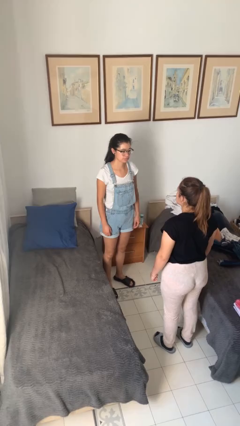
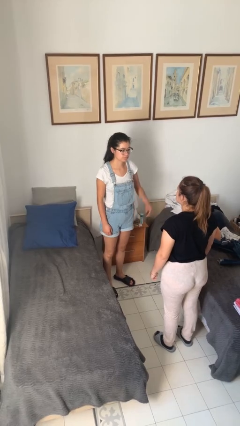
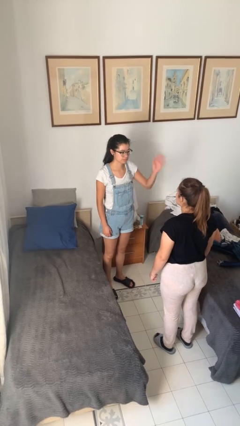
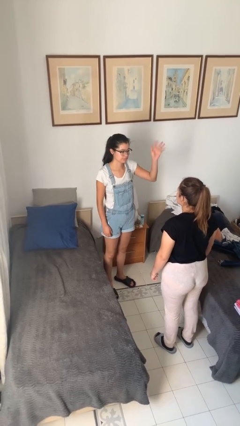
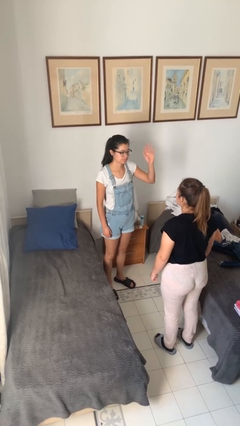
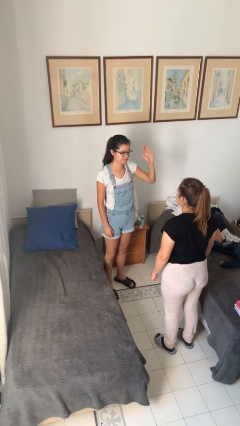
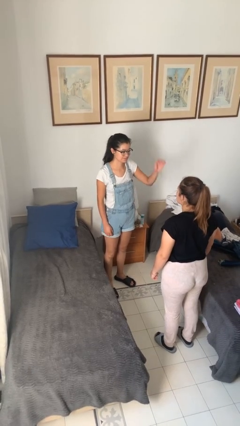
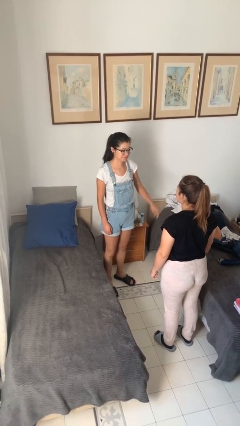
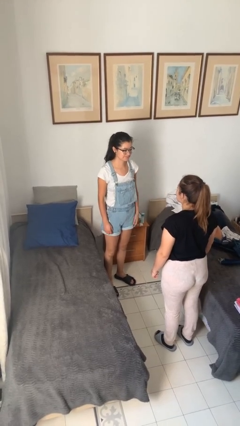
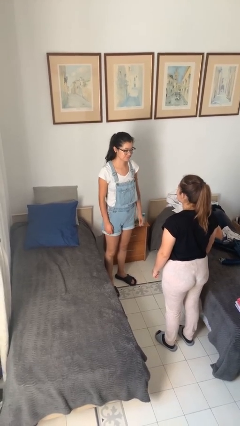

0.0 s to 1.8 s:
person waves at person

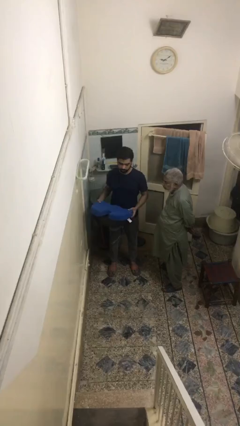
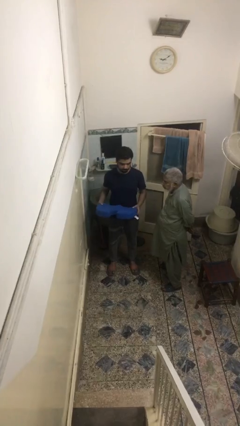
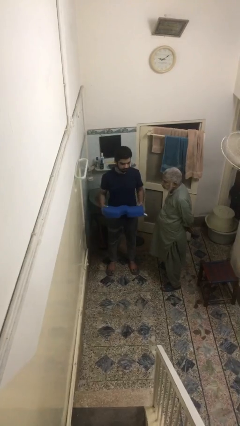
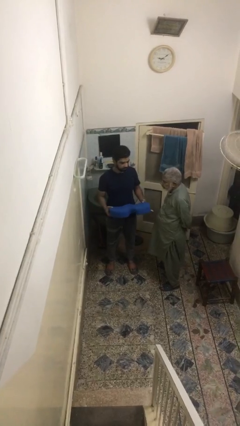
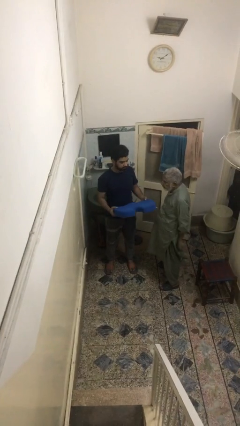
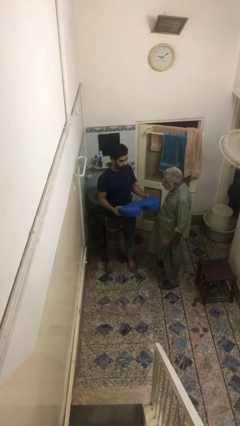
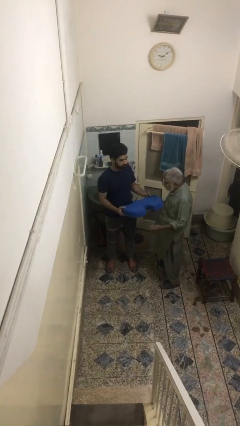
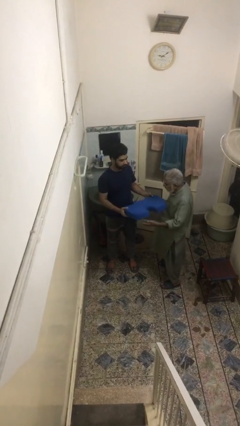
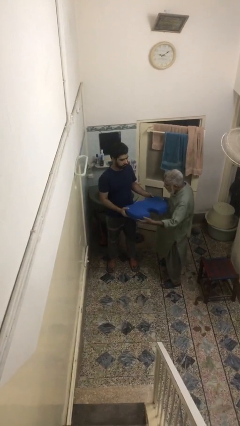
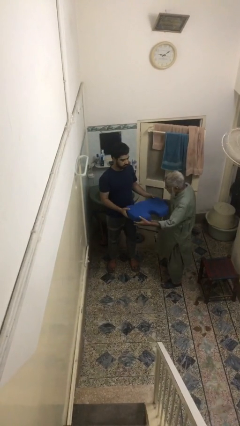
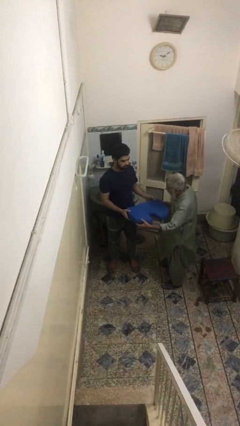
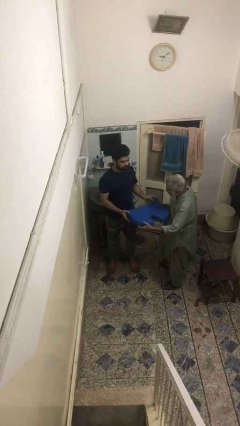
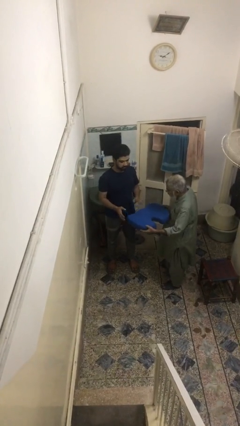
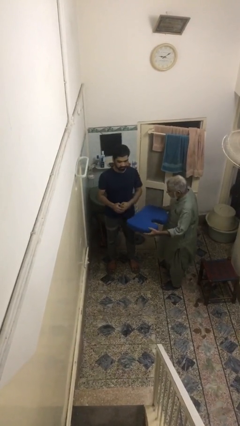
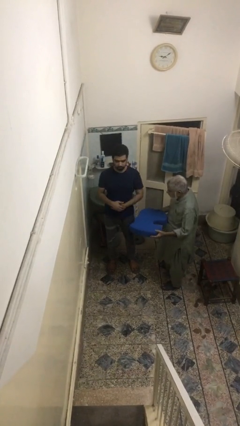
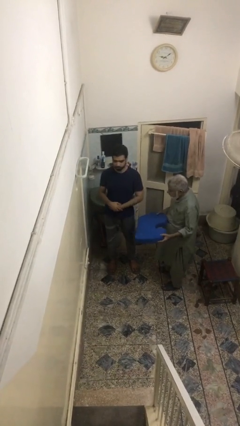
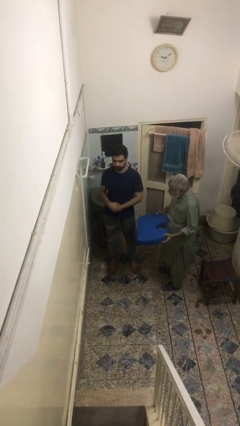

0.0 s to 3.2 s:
person transfers object to person

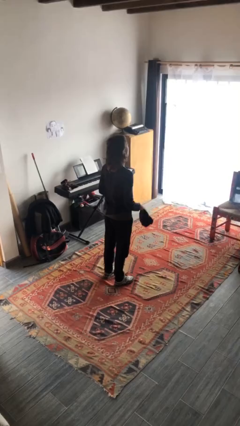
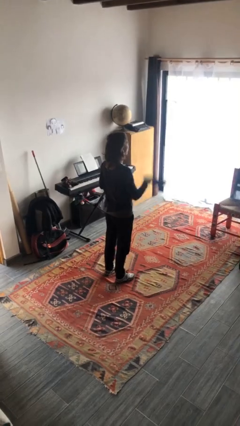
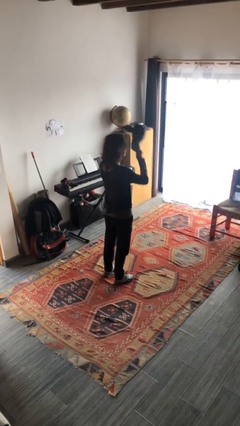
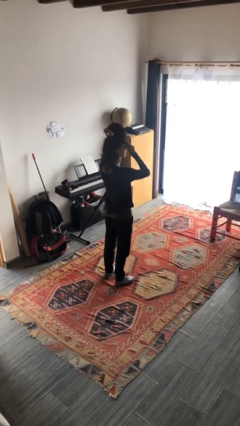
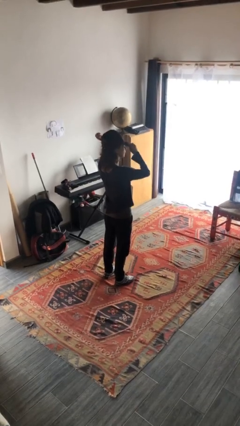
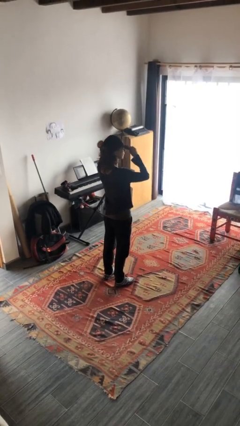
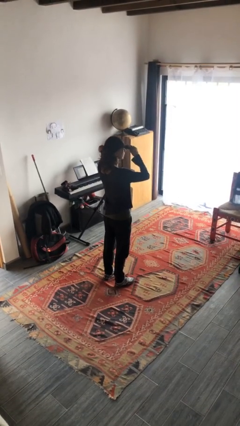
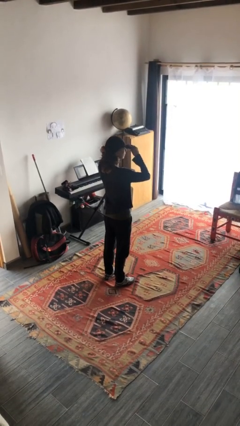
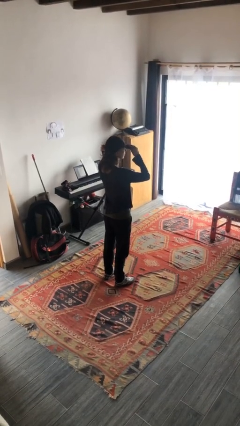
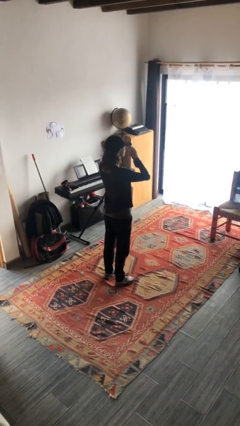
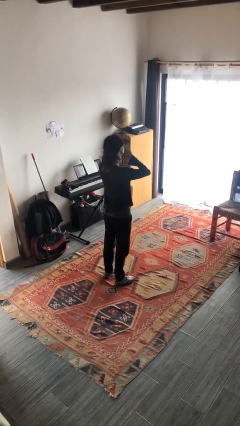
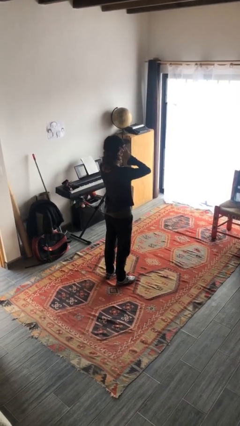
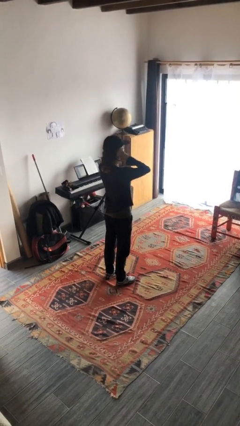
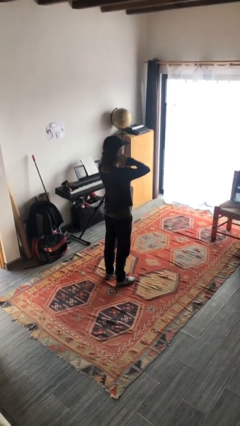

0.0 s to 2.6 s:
person puts on hat

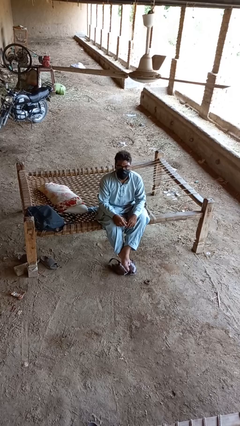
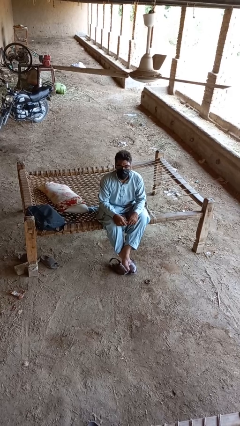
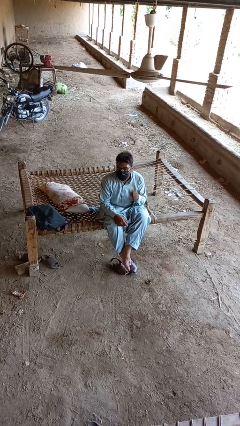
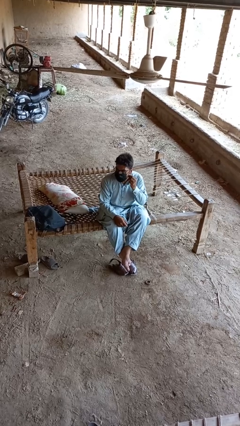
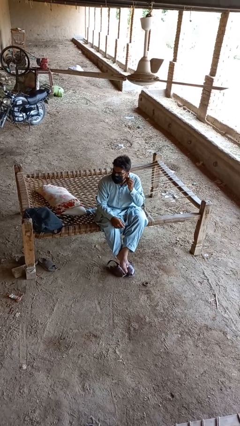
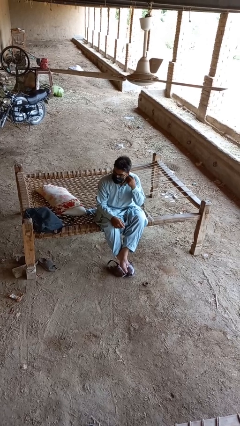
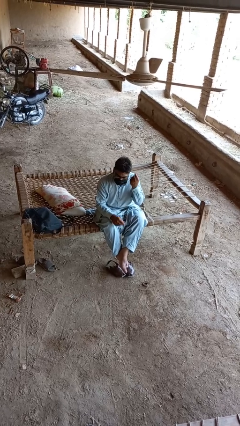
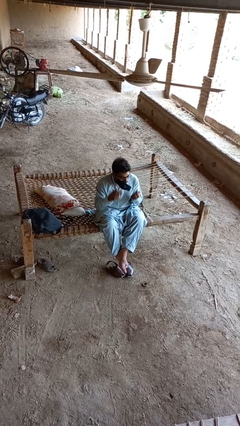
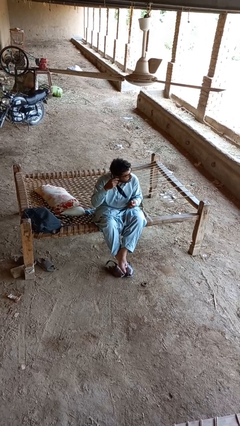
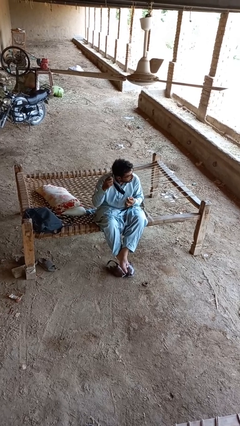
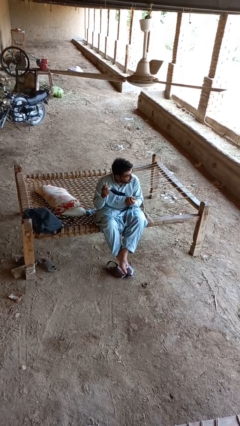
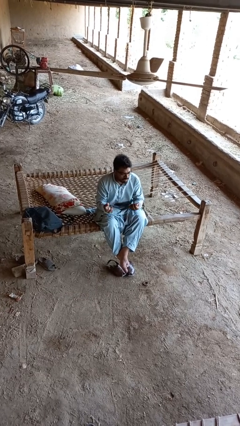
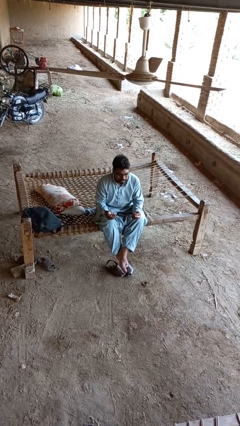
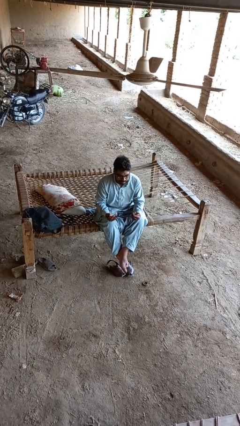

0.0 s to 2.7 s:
person takes off facemask

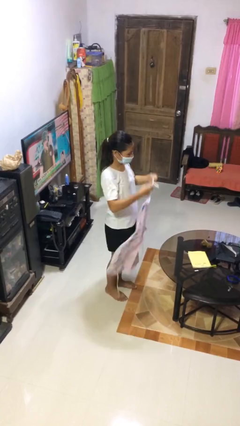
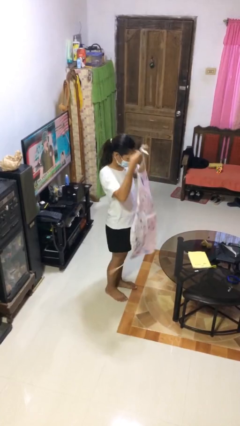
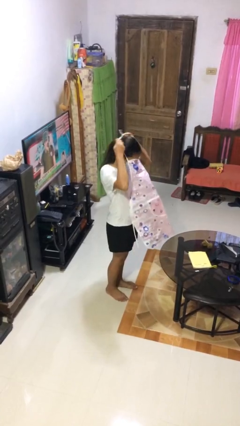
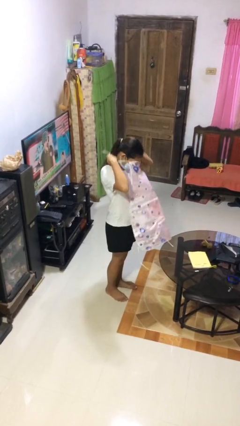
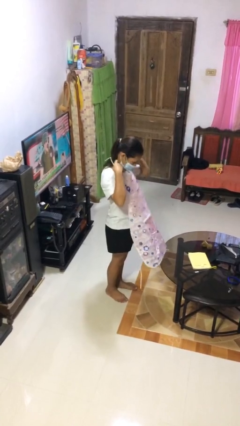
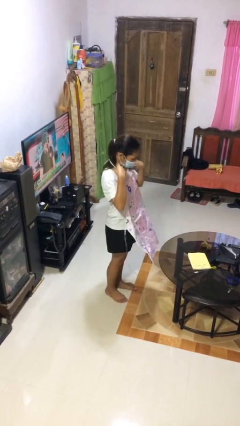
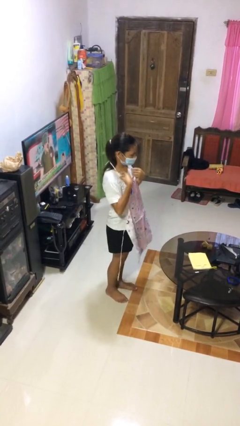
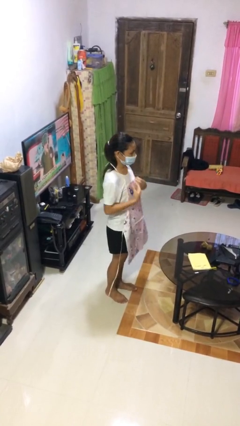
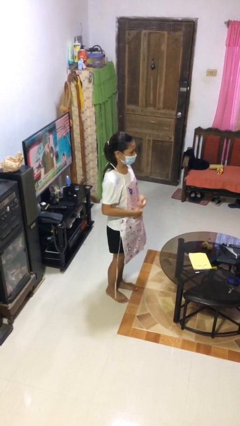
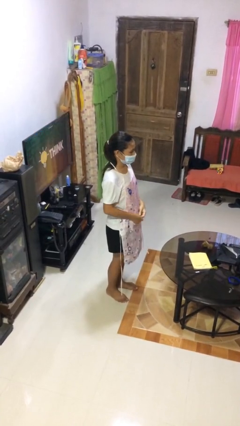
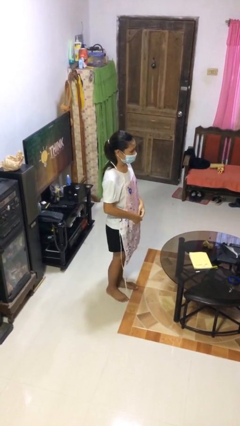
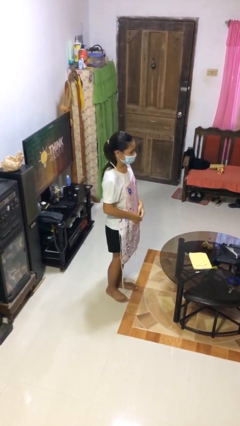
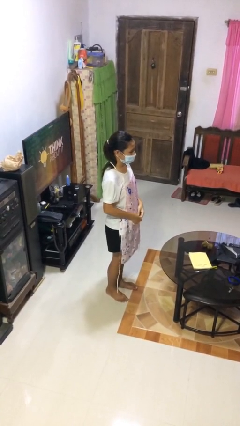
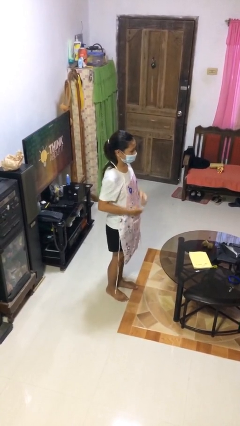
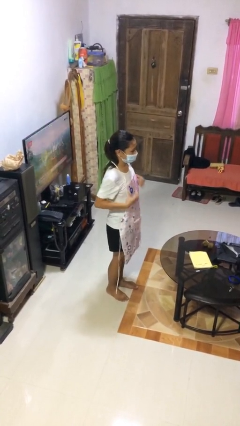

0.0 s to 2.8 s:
person puts on apron

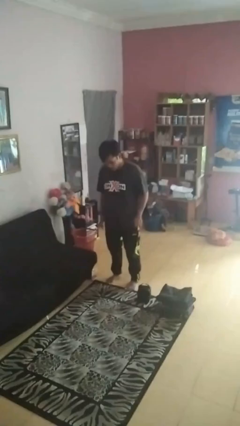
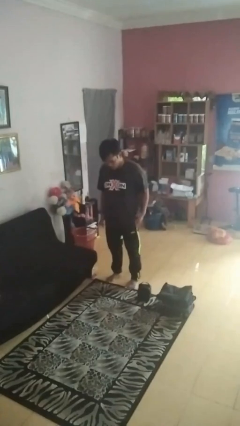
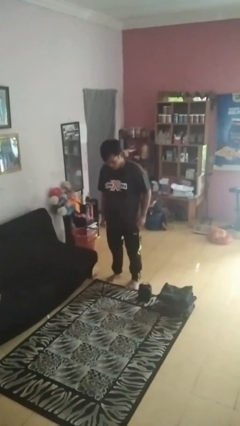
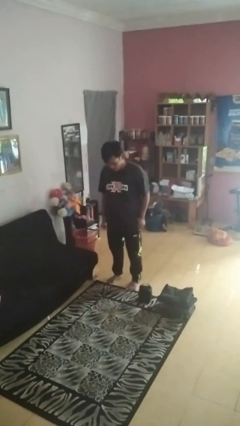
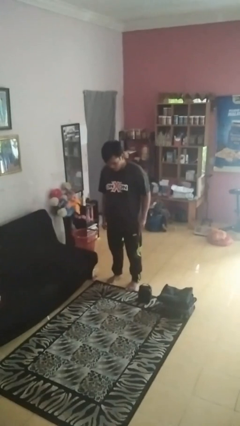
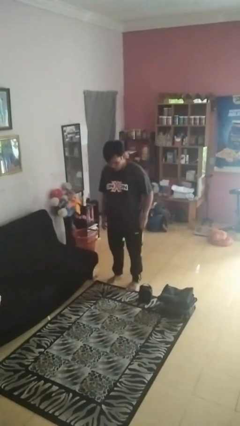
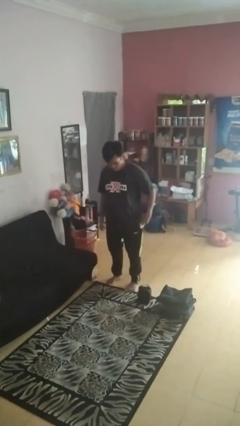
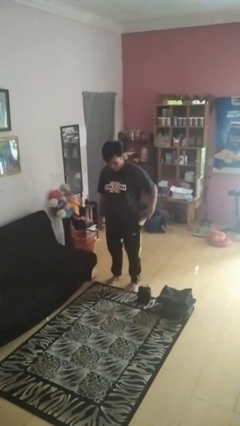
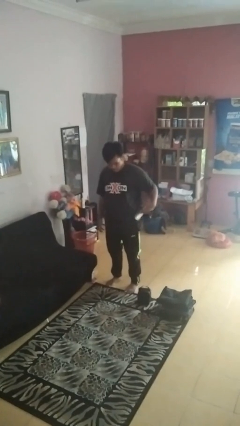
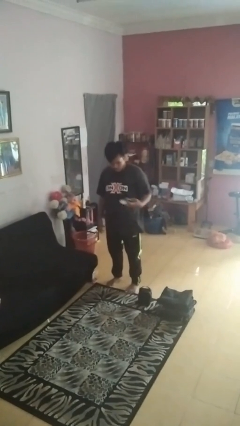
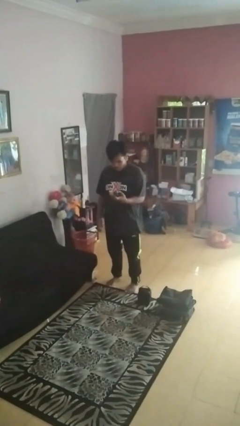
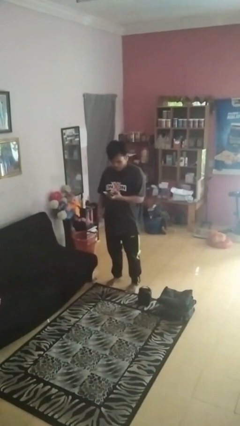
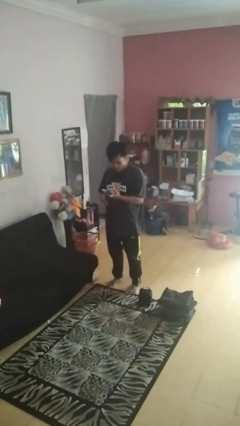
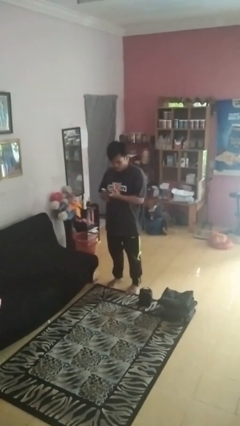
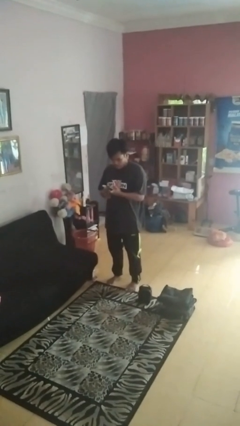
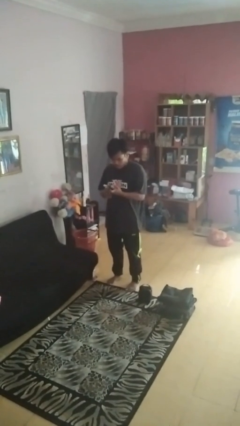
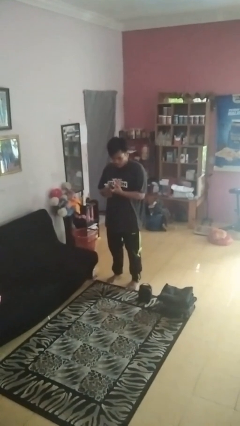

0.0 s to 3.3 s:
person takes phone from pocket

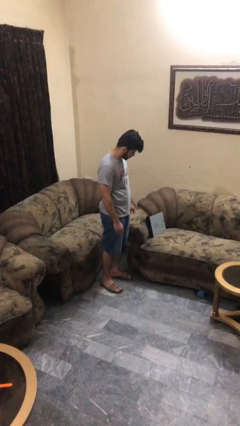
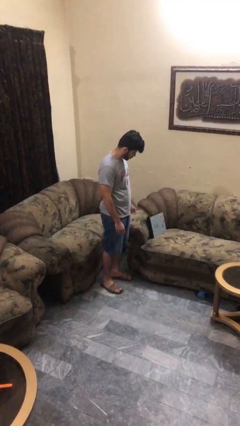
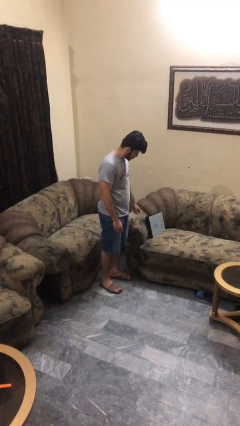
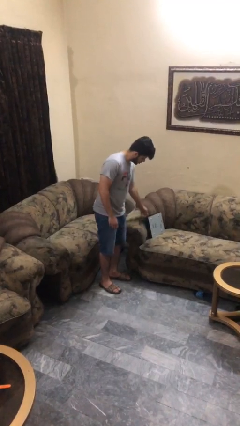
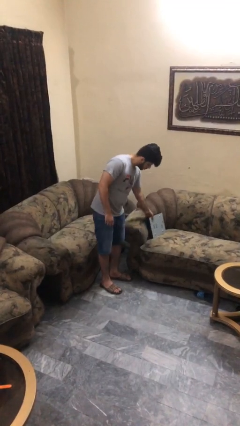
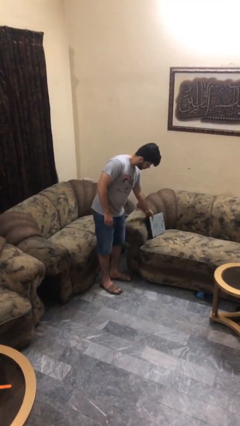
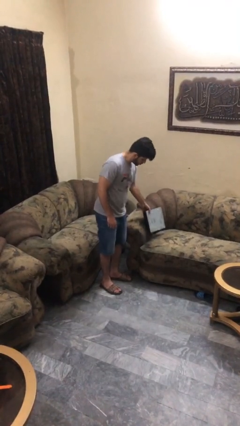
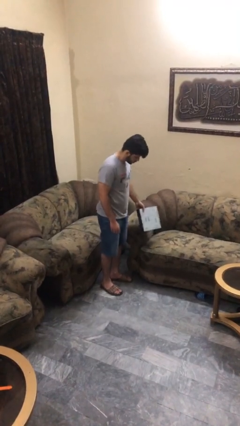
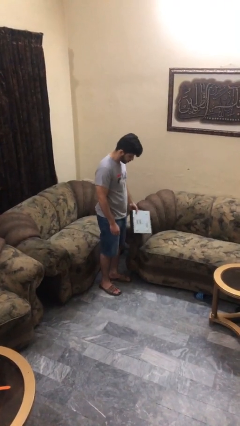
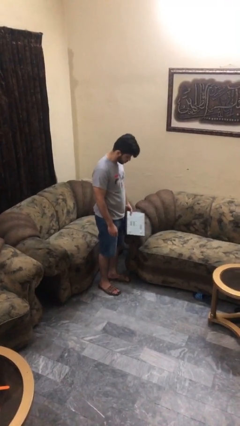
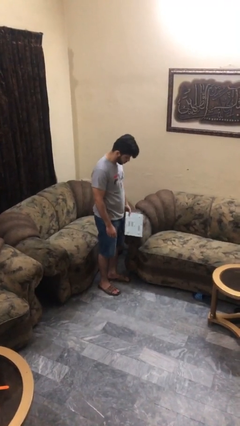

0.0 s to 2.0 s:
person picks up object from couch
